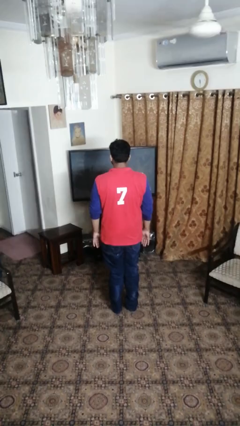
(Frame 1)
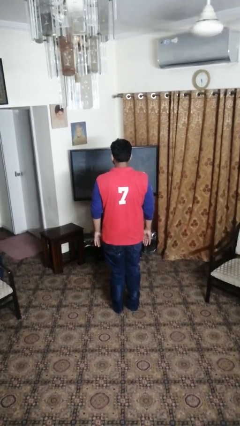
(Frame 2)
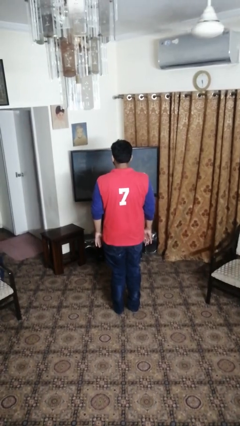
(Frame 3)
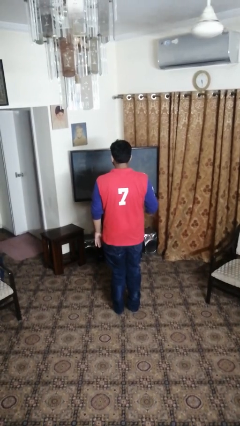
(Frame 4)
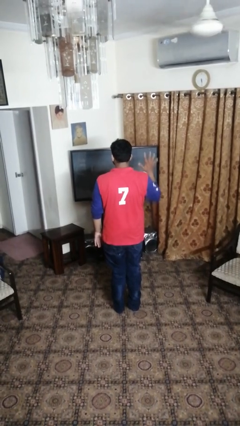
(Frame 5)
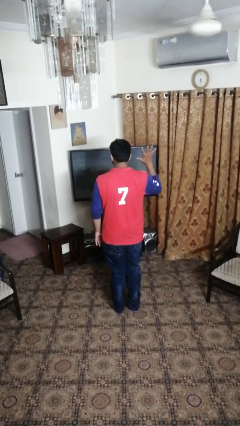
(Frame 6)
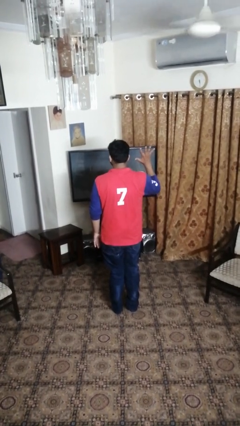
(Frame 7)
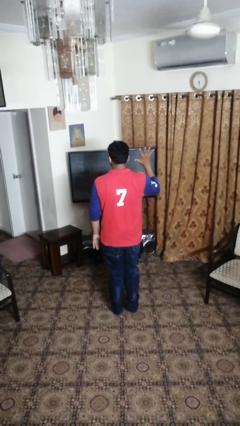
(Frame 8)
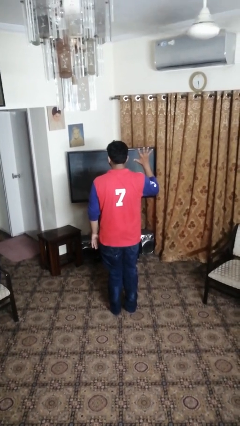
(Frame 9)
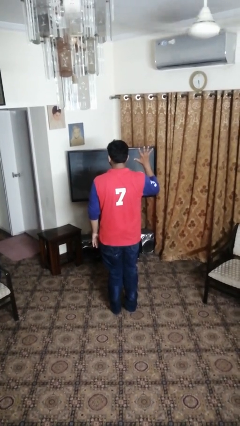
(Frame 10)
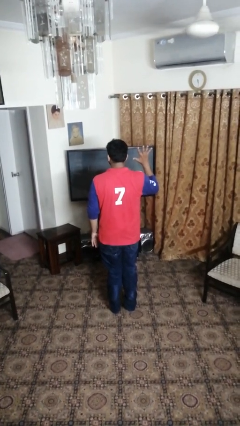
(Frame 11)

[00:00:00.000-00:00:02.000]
person gestures number five

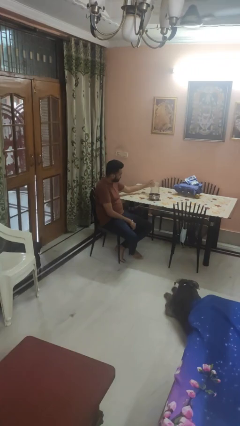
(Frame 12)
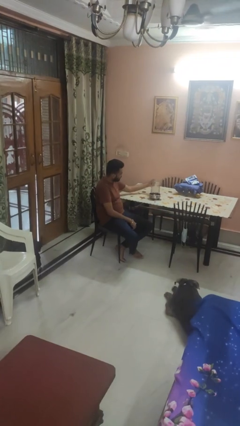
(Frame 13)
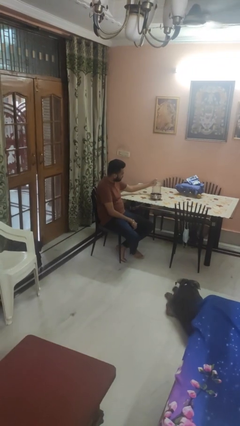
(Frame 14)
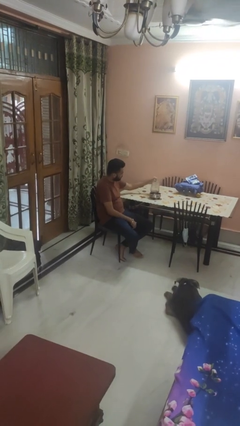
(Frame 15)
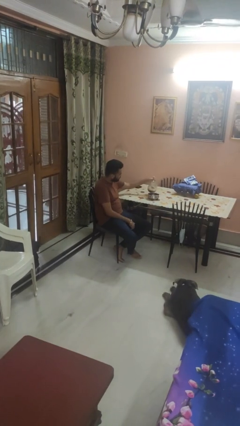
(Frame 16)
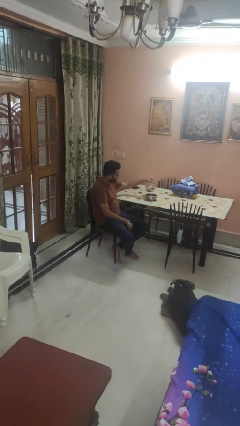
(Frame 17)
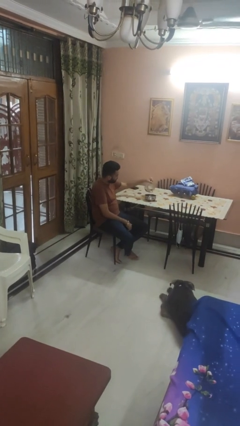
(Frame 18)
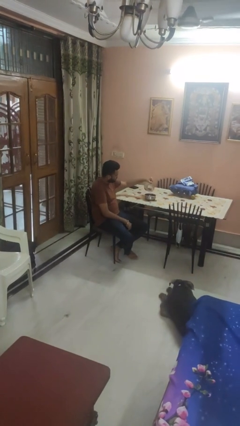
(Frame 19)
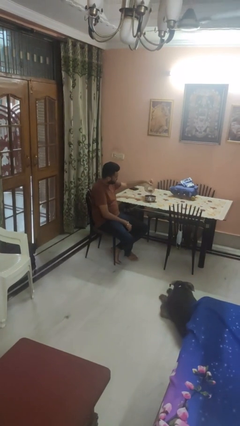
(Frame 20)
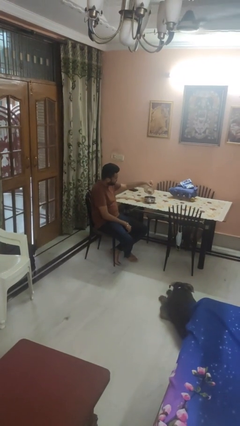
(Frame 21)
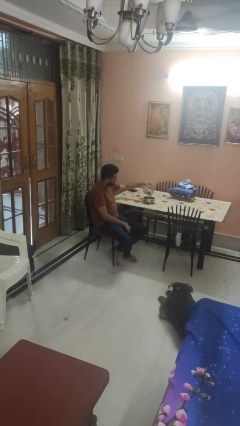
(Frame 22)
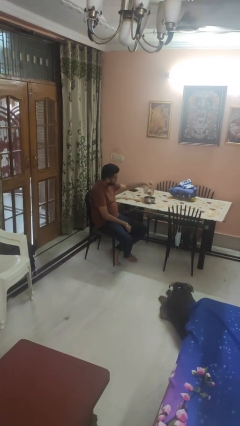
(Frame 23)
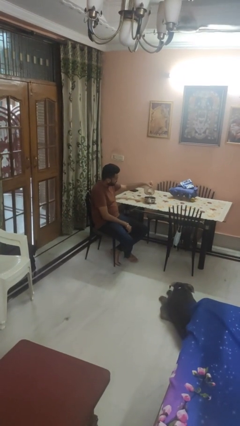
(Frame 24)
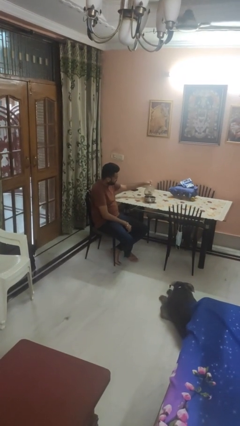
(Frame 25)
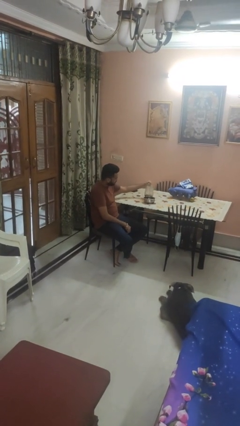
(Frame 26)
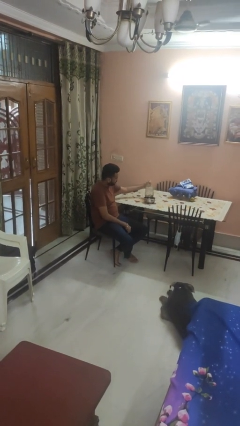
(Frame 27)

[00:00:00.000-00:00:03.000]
person pours into bowl

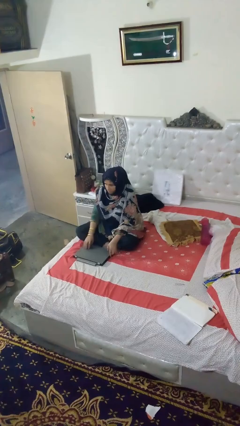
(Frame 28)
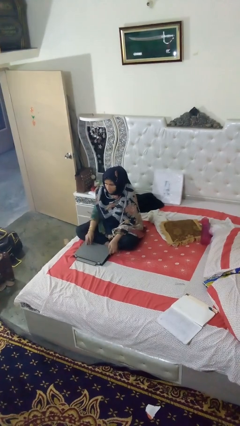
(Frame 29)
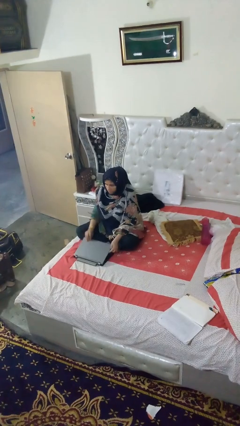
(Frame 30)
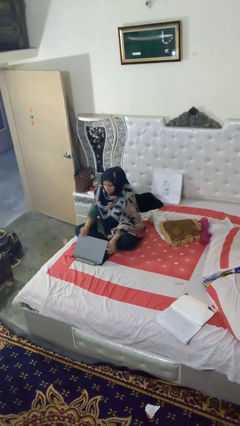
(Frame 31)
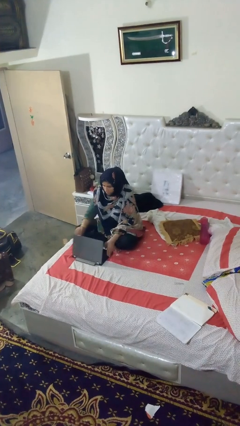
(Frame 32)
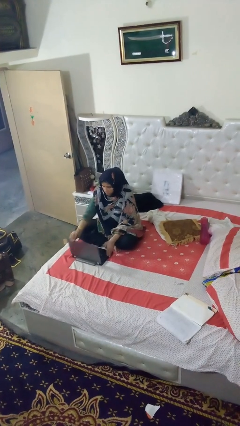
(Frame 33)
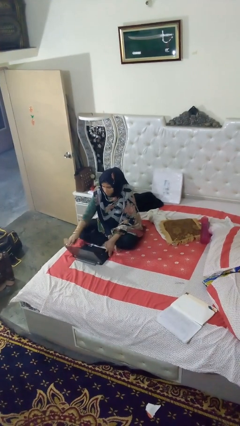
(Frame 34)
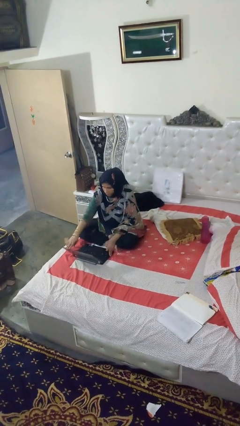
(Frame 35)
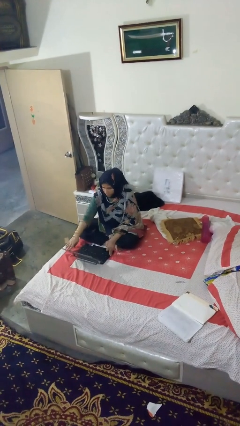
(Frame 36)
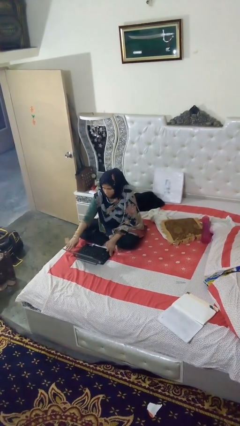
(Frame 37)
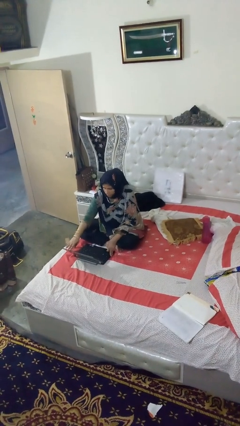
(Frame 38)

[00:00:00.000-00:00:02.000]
person opens laptop

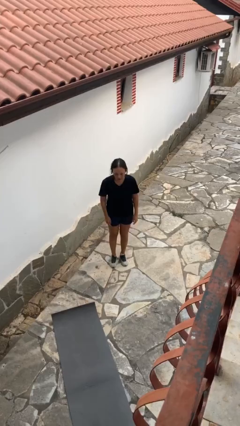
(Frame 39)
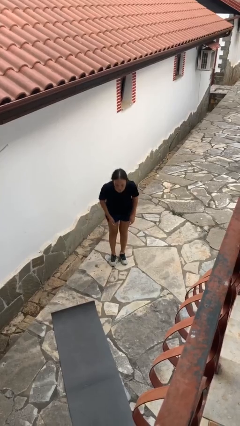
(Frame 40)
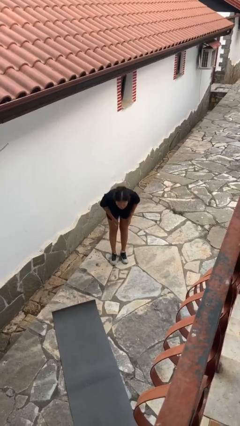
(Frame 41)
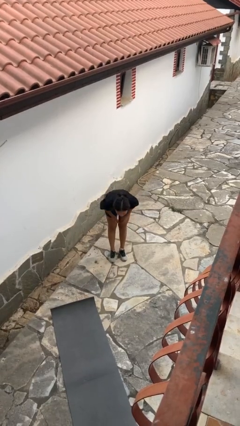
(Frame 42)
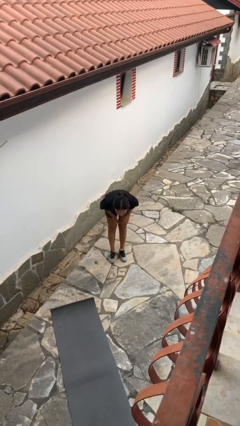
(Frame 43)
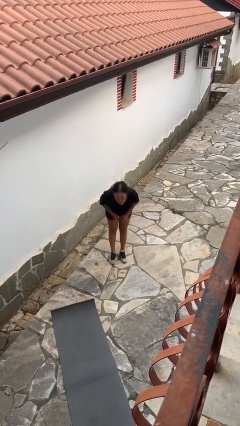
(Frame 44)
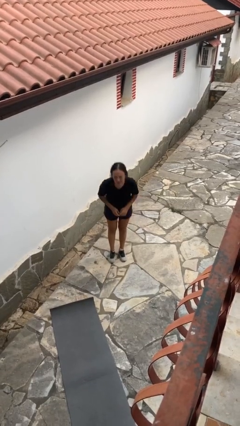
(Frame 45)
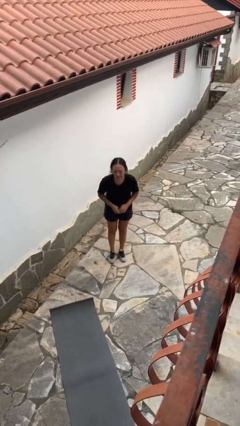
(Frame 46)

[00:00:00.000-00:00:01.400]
person bows

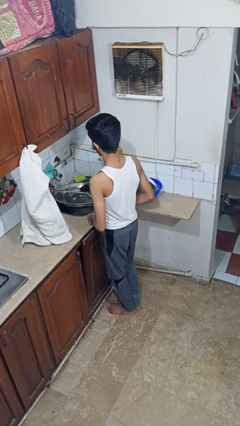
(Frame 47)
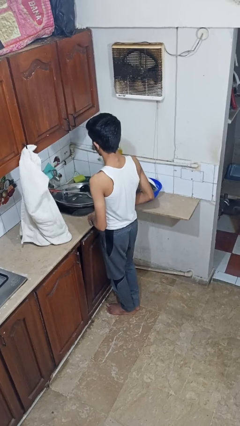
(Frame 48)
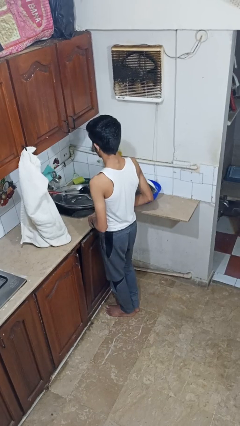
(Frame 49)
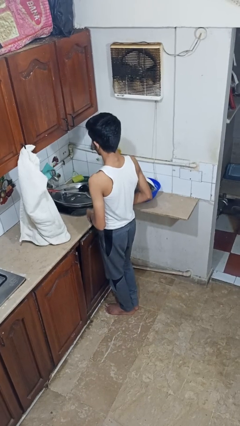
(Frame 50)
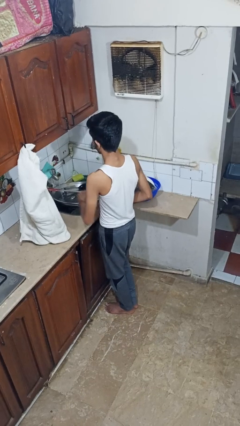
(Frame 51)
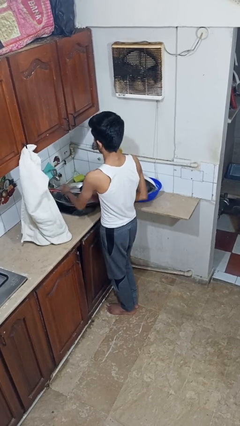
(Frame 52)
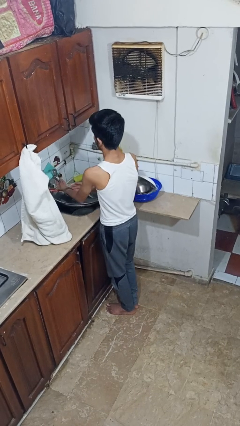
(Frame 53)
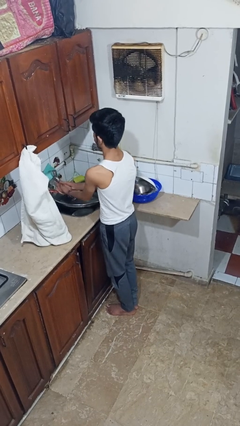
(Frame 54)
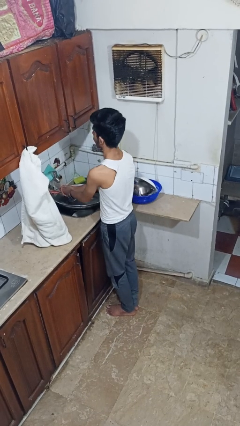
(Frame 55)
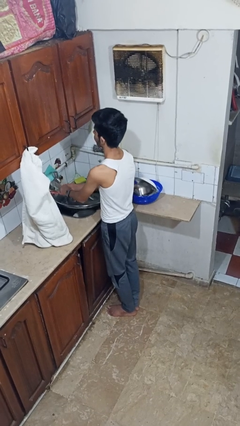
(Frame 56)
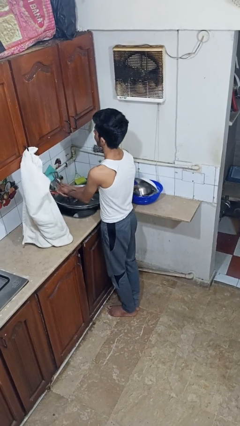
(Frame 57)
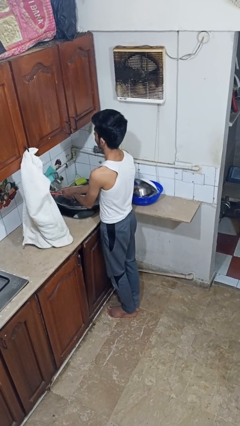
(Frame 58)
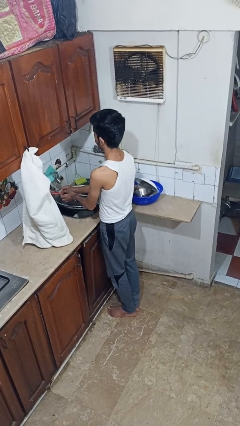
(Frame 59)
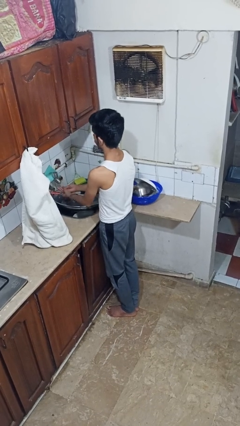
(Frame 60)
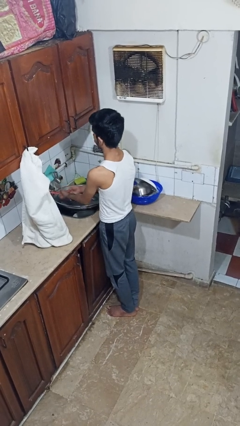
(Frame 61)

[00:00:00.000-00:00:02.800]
person washes hands

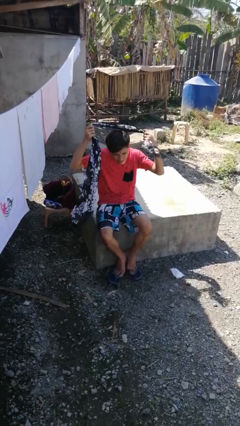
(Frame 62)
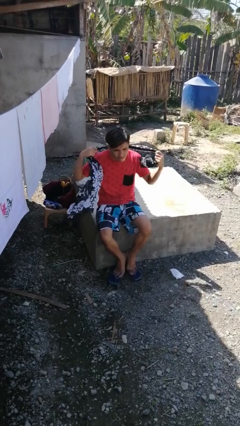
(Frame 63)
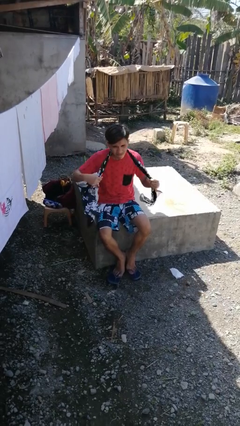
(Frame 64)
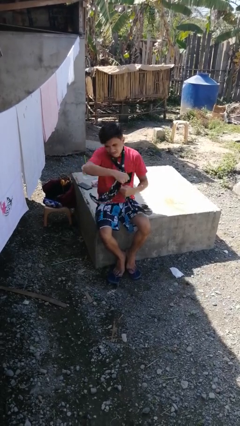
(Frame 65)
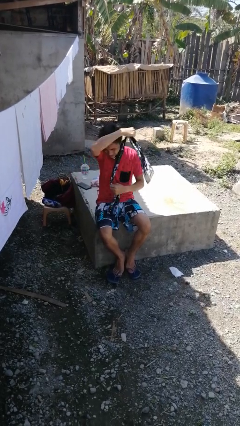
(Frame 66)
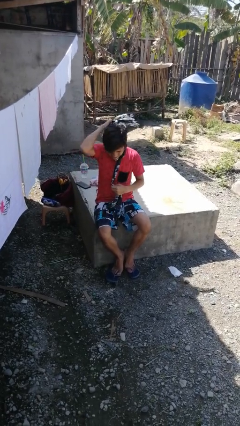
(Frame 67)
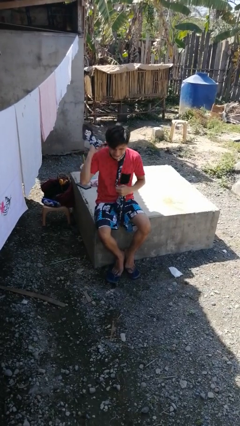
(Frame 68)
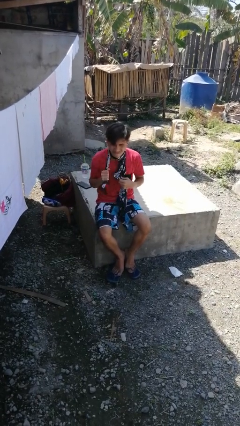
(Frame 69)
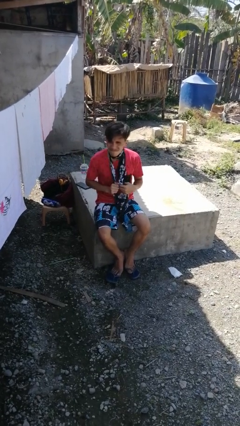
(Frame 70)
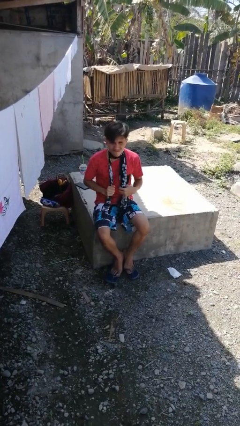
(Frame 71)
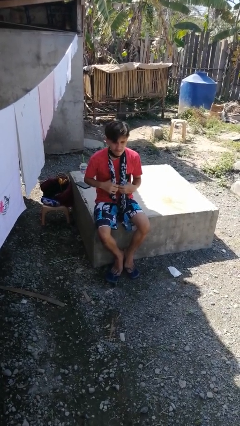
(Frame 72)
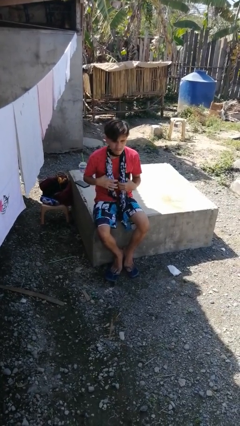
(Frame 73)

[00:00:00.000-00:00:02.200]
person puts on scarf

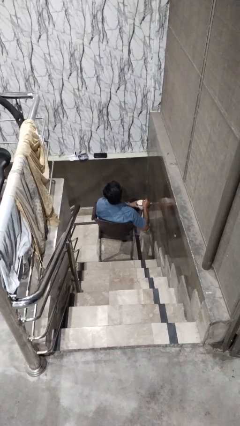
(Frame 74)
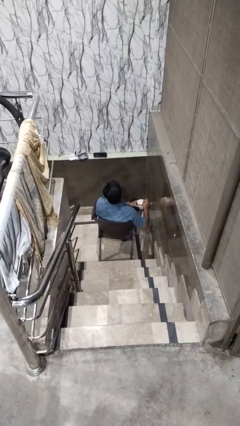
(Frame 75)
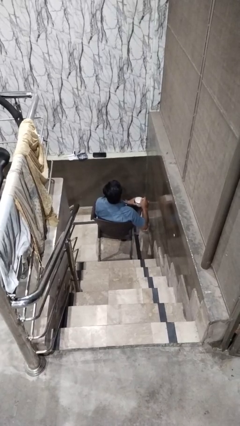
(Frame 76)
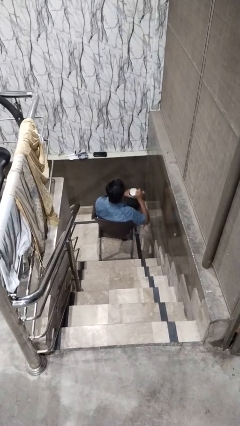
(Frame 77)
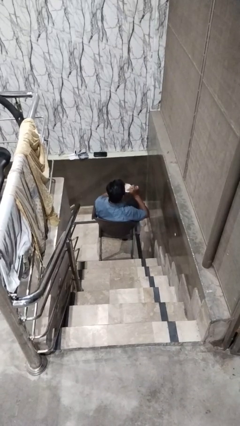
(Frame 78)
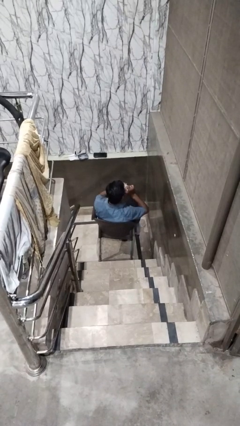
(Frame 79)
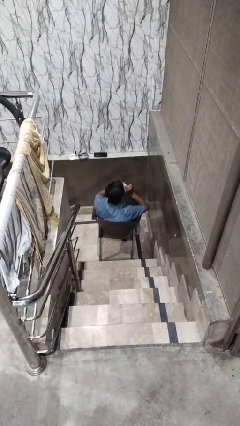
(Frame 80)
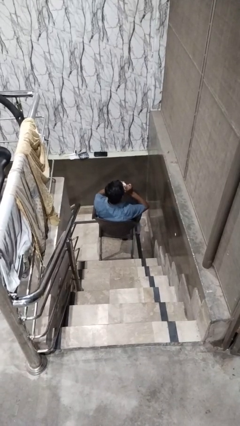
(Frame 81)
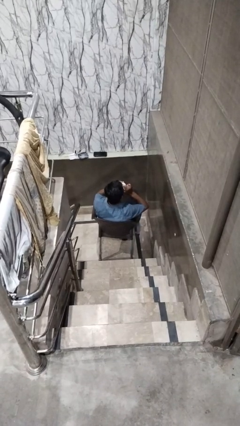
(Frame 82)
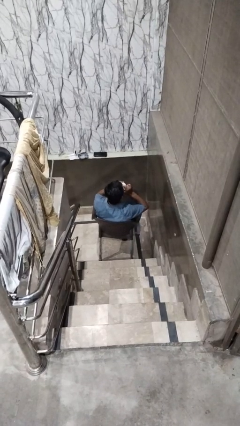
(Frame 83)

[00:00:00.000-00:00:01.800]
person drinks from mug

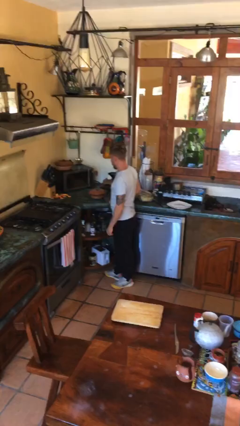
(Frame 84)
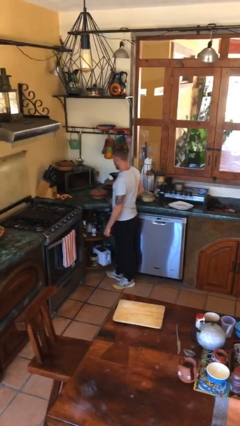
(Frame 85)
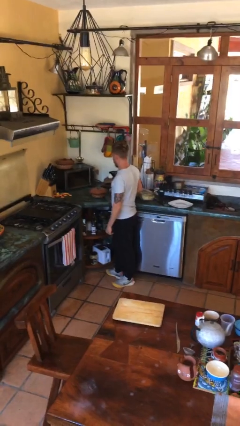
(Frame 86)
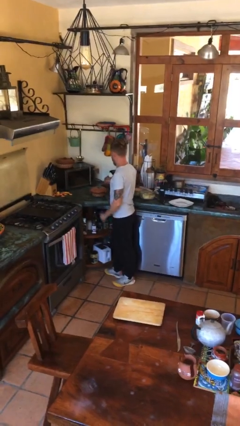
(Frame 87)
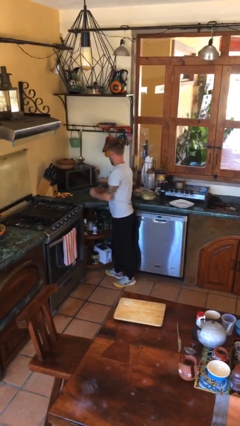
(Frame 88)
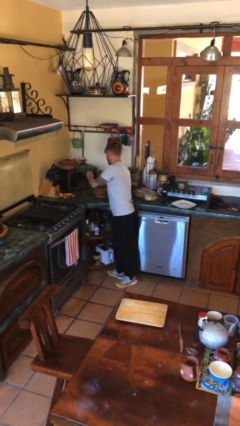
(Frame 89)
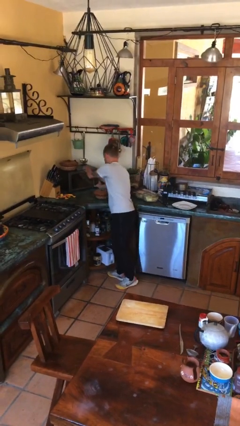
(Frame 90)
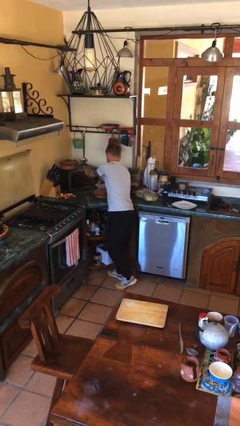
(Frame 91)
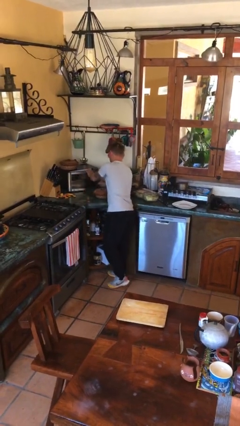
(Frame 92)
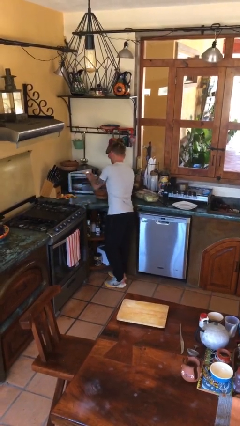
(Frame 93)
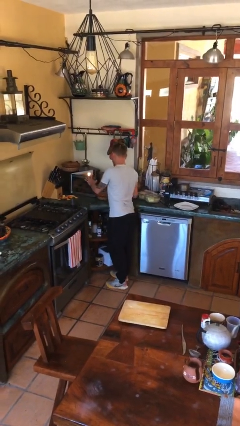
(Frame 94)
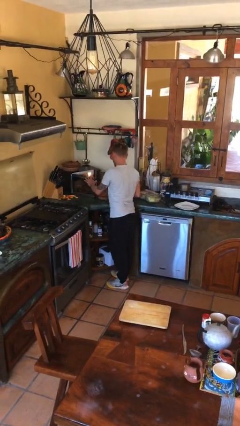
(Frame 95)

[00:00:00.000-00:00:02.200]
person opens microwave
